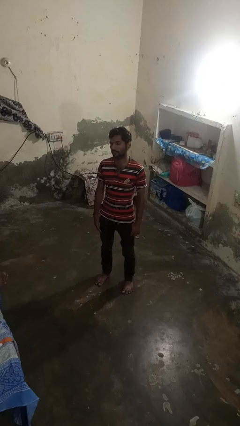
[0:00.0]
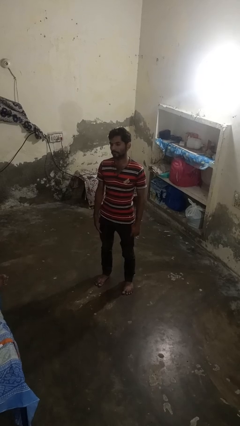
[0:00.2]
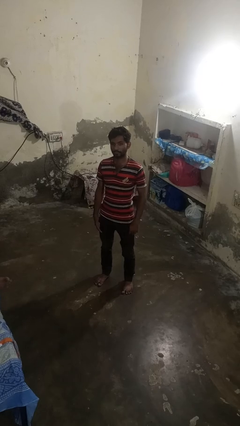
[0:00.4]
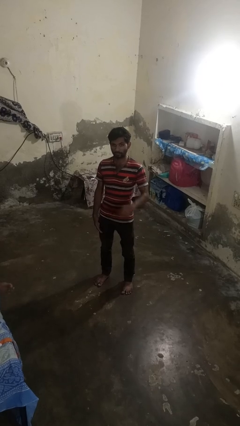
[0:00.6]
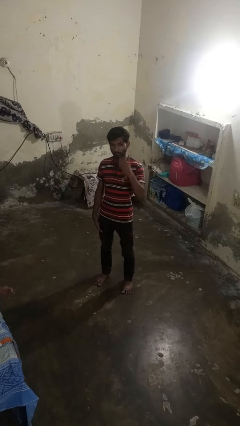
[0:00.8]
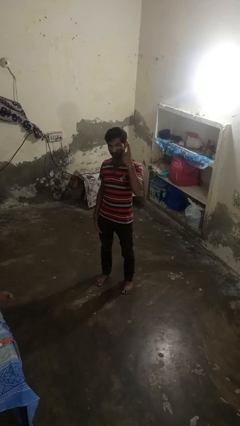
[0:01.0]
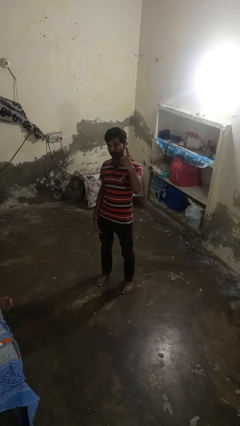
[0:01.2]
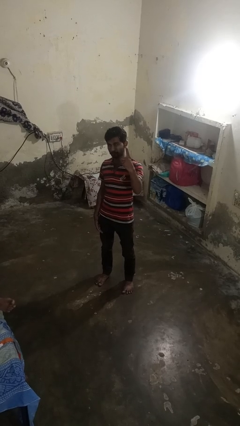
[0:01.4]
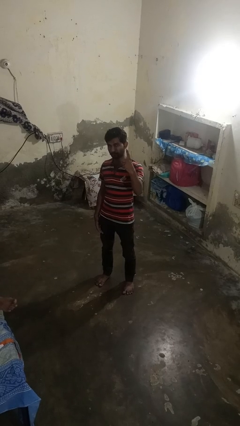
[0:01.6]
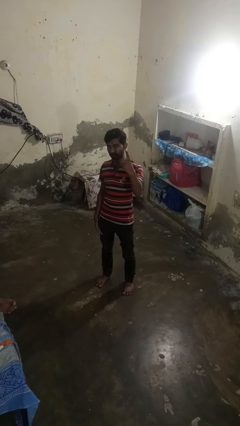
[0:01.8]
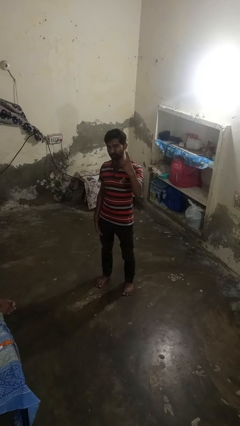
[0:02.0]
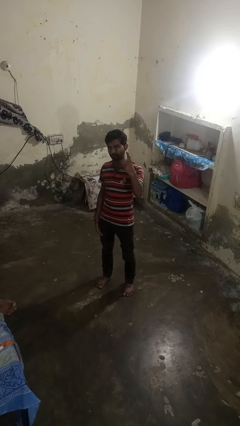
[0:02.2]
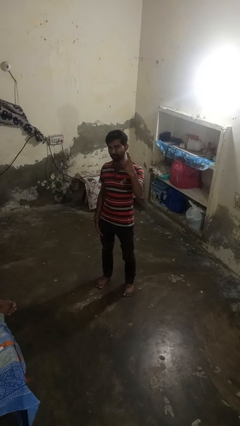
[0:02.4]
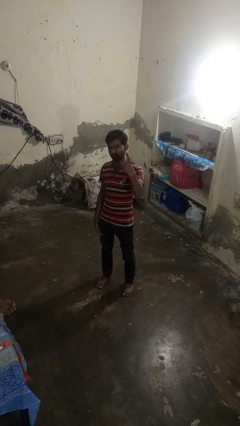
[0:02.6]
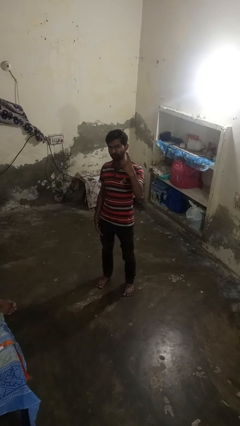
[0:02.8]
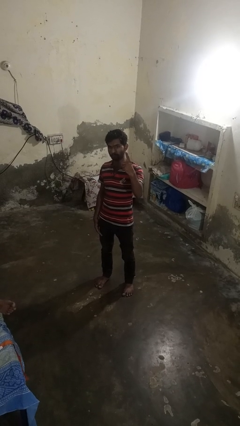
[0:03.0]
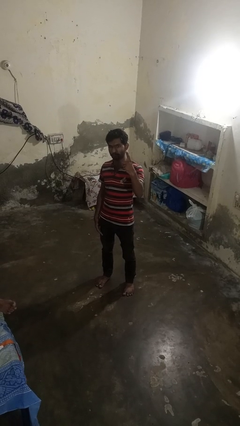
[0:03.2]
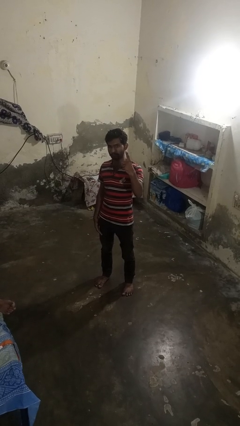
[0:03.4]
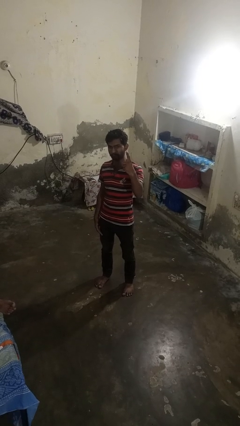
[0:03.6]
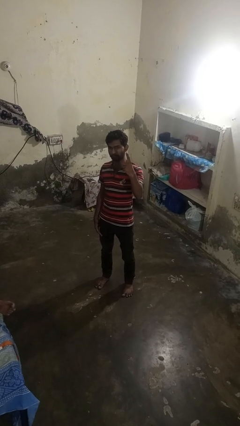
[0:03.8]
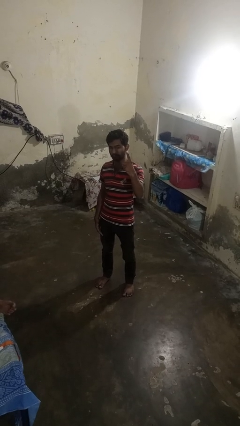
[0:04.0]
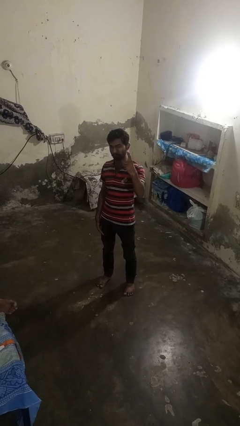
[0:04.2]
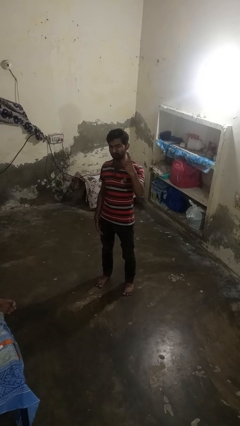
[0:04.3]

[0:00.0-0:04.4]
person gestures number one

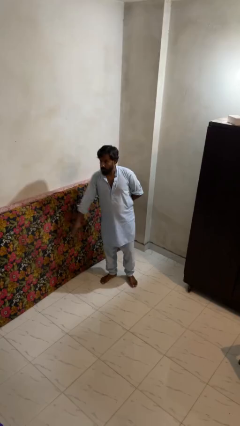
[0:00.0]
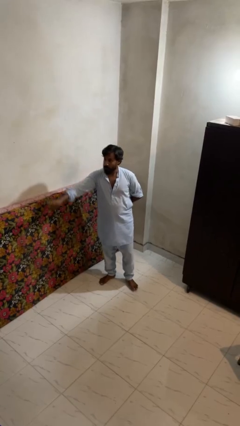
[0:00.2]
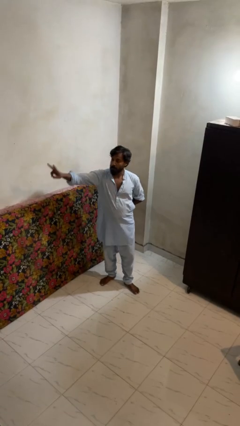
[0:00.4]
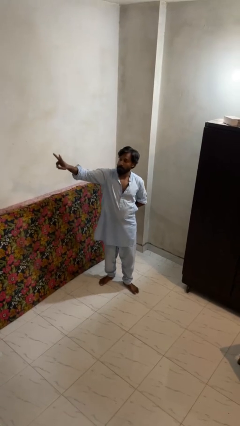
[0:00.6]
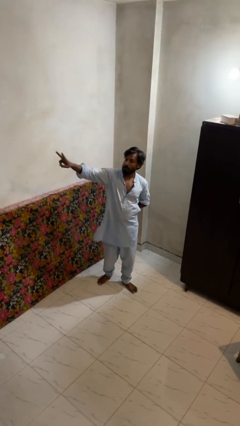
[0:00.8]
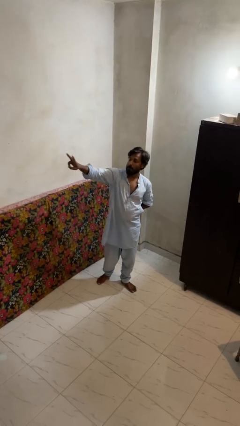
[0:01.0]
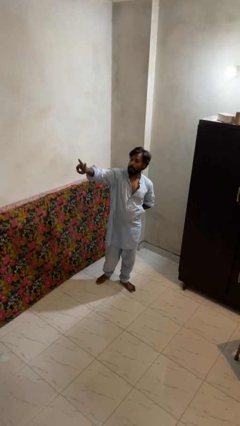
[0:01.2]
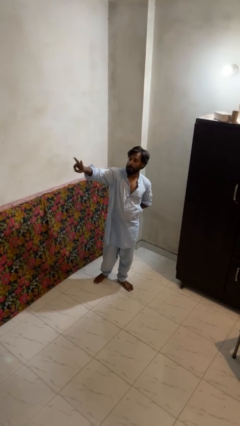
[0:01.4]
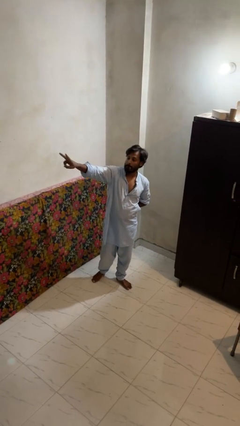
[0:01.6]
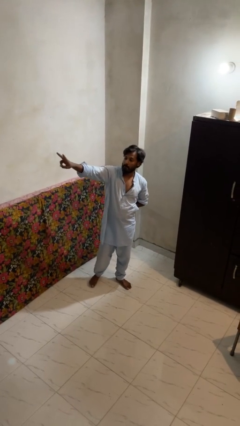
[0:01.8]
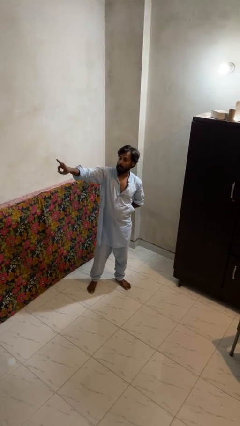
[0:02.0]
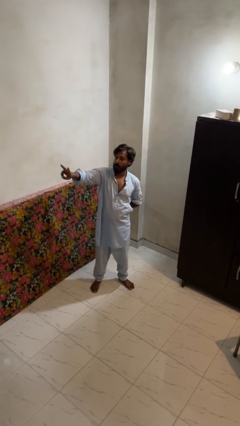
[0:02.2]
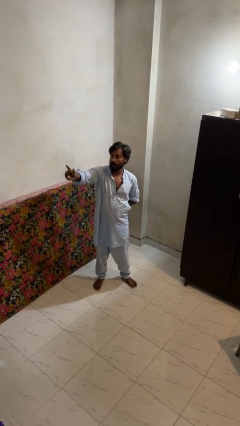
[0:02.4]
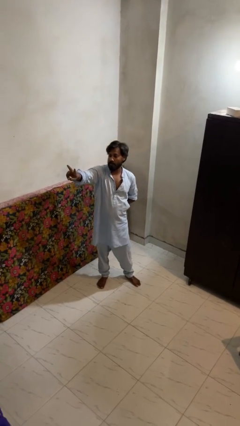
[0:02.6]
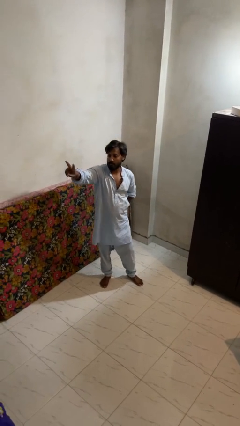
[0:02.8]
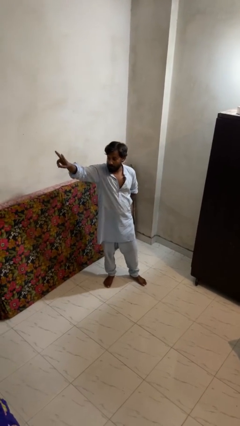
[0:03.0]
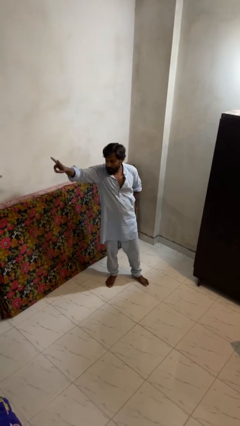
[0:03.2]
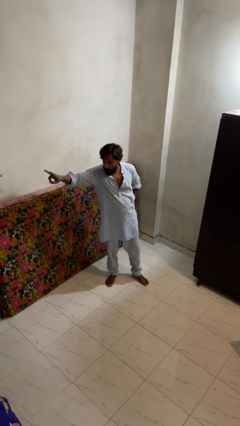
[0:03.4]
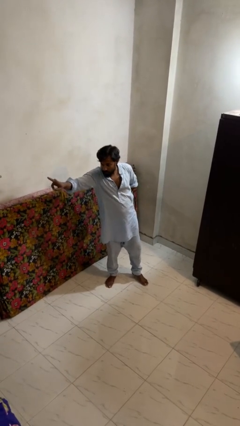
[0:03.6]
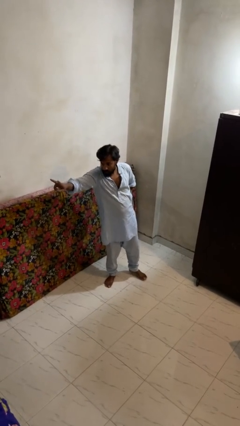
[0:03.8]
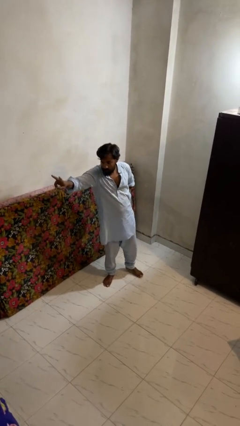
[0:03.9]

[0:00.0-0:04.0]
person gestures peace

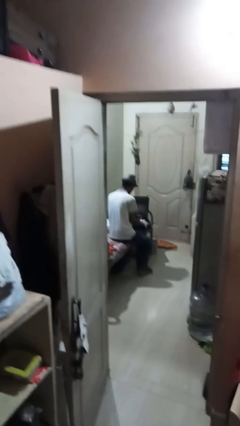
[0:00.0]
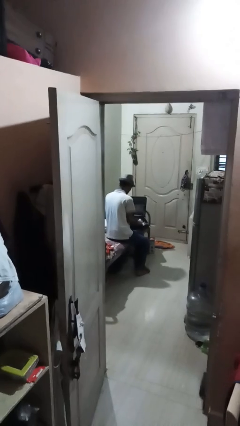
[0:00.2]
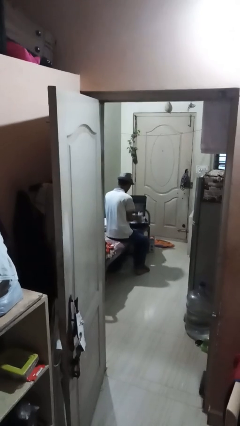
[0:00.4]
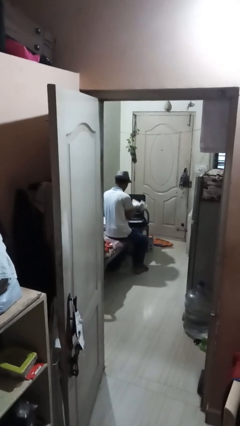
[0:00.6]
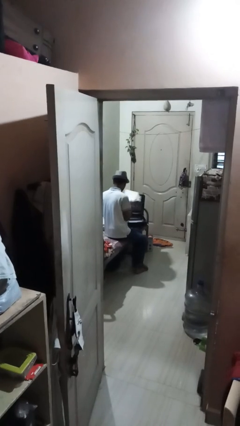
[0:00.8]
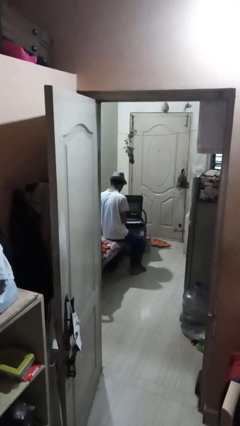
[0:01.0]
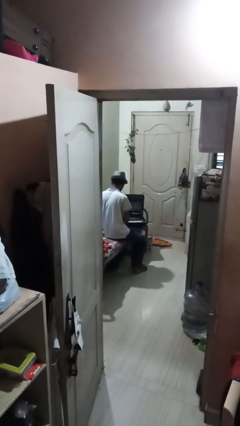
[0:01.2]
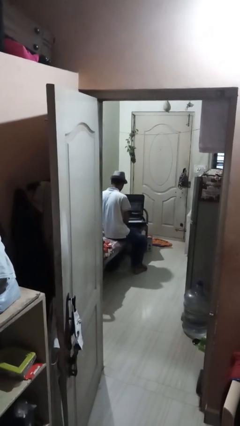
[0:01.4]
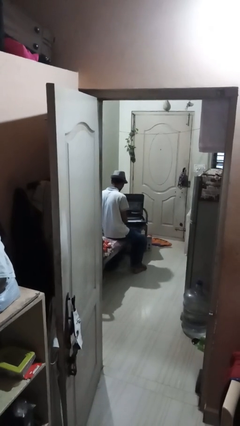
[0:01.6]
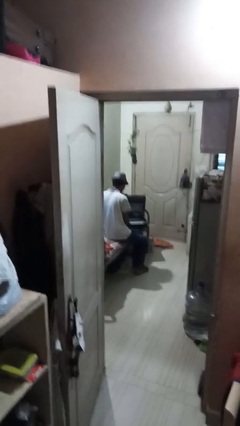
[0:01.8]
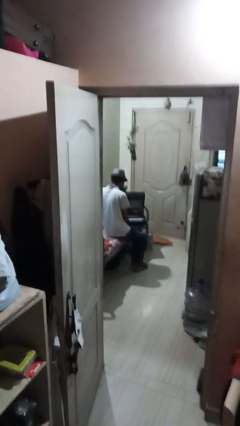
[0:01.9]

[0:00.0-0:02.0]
person unloads clothes from suitcase

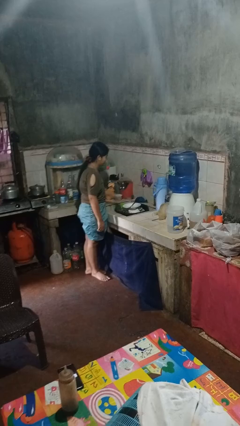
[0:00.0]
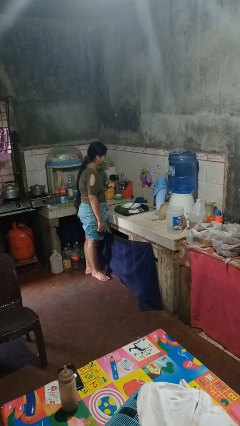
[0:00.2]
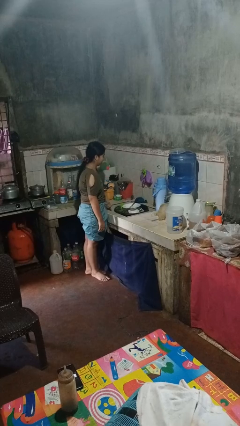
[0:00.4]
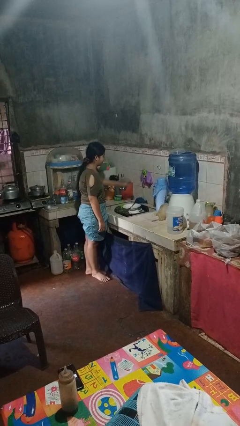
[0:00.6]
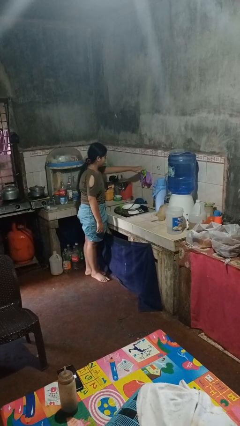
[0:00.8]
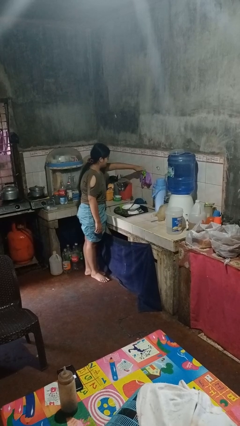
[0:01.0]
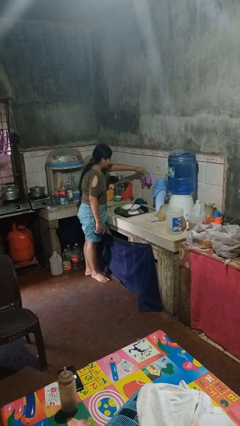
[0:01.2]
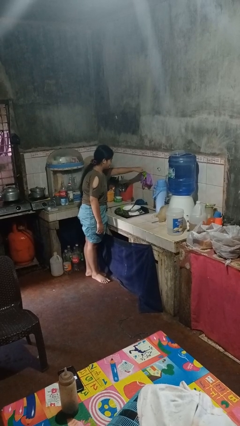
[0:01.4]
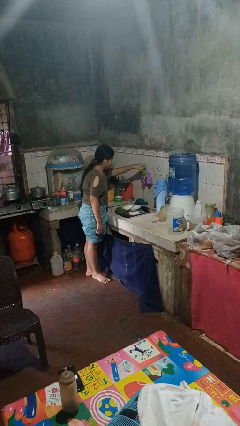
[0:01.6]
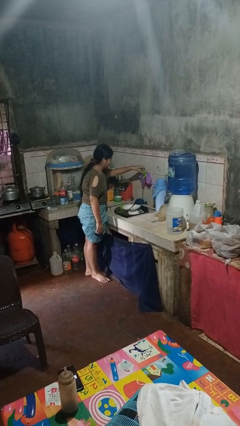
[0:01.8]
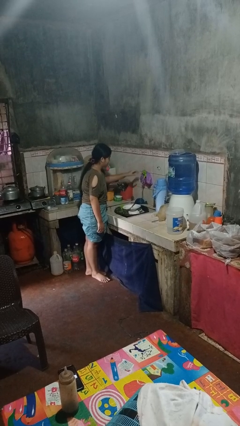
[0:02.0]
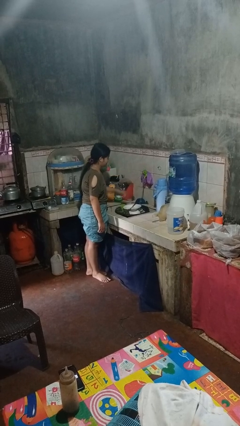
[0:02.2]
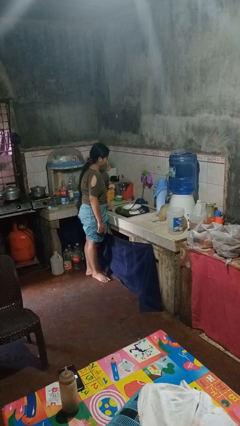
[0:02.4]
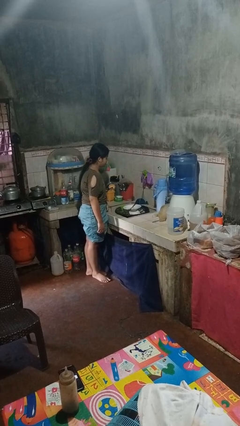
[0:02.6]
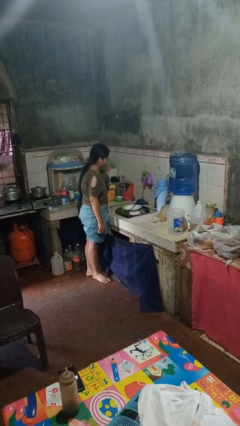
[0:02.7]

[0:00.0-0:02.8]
person turns on faucet

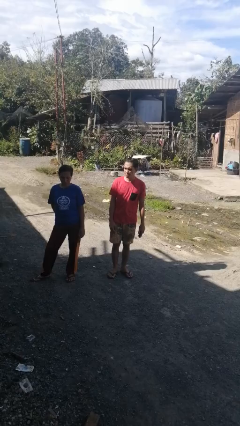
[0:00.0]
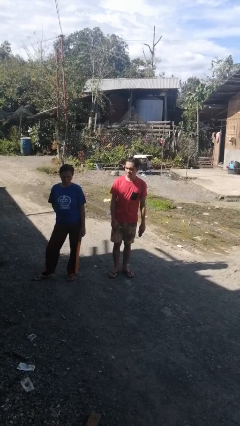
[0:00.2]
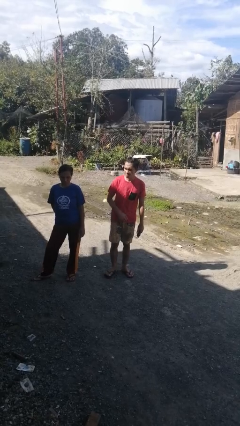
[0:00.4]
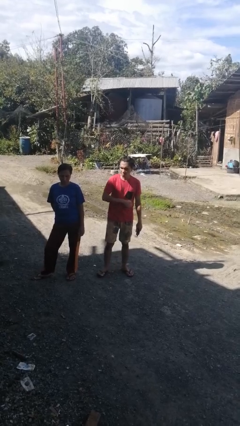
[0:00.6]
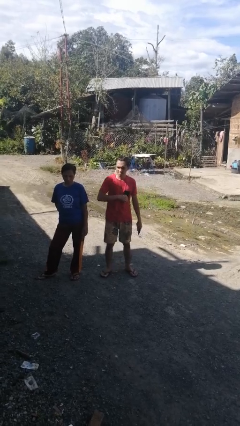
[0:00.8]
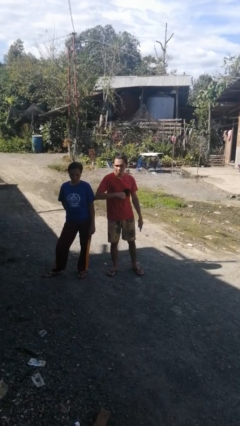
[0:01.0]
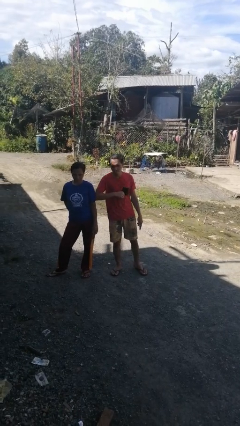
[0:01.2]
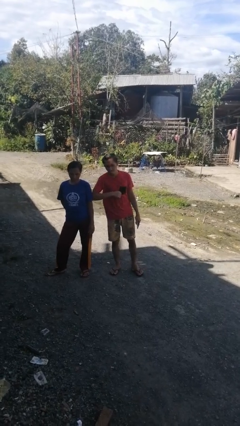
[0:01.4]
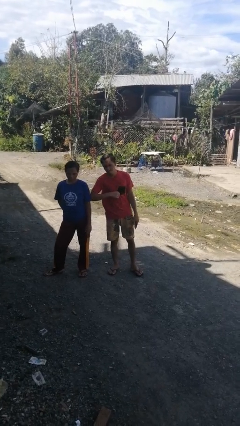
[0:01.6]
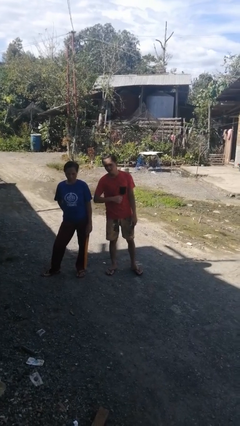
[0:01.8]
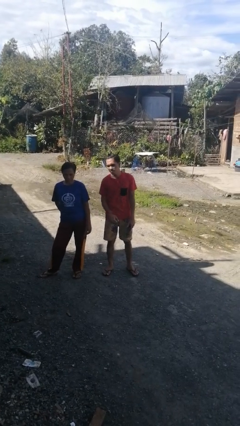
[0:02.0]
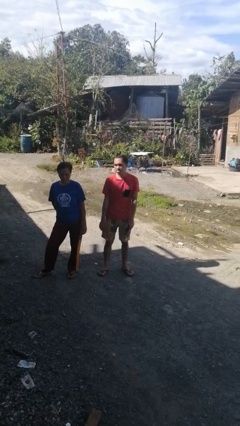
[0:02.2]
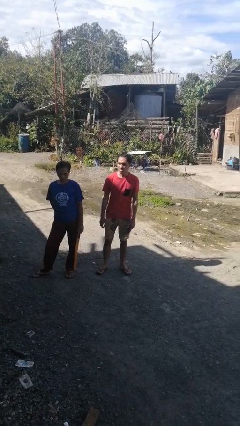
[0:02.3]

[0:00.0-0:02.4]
person nudges person with elbow

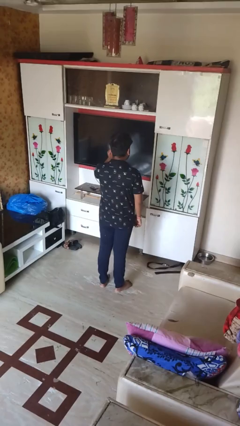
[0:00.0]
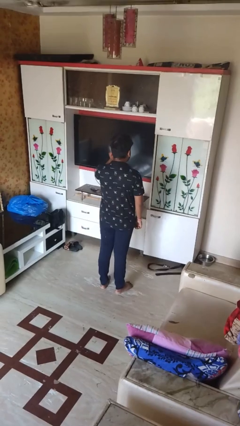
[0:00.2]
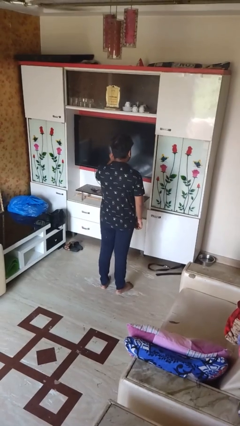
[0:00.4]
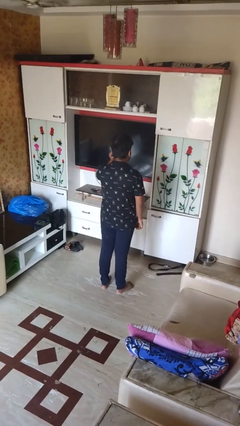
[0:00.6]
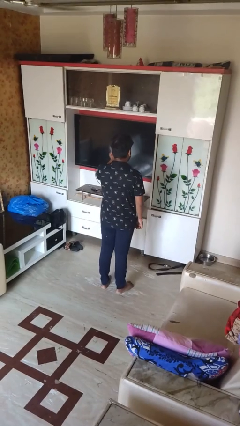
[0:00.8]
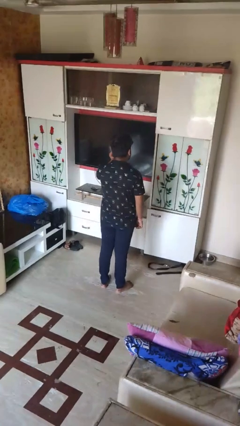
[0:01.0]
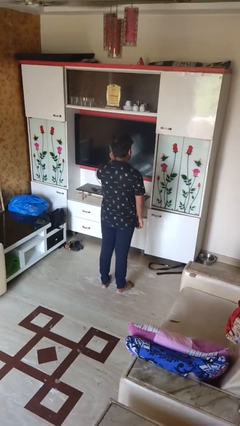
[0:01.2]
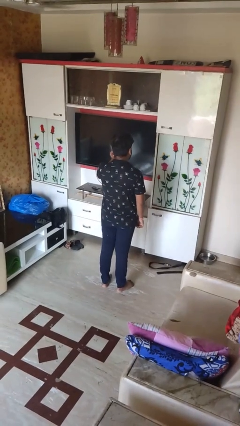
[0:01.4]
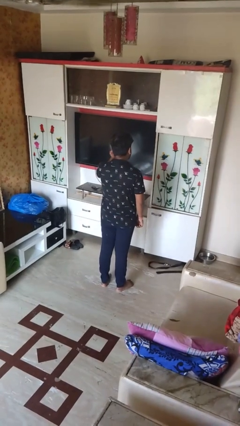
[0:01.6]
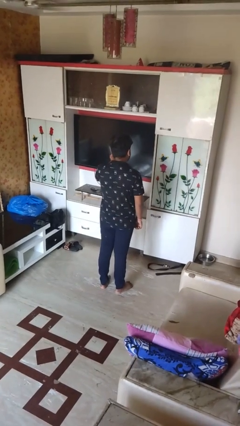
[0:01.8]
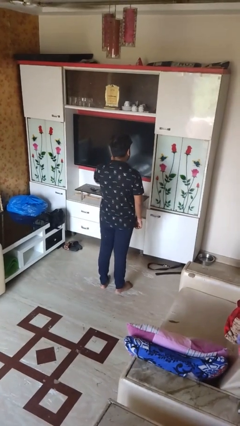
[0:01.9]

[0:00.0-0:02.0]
person touches earlobe
